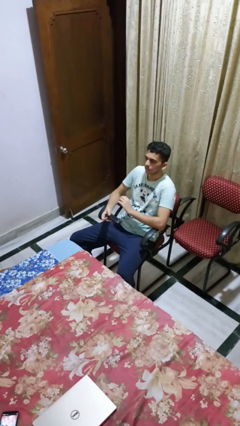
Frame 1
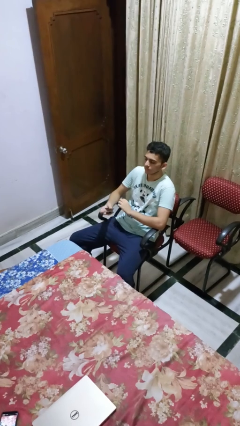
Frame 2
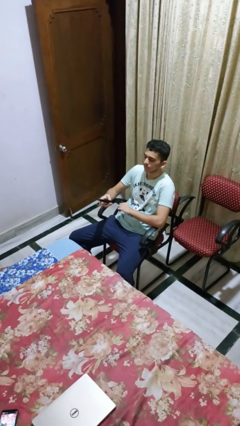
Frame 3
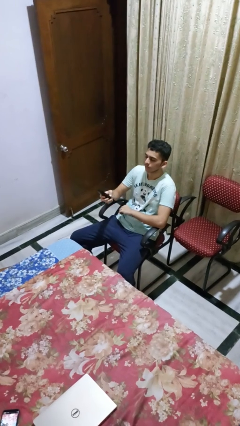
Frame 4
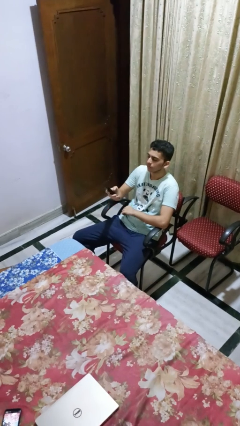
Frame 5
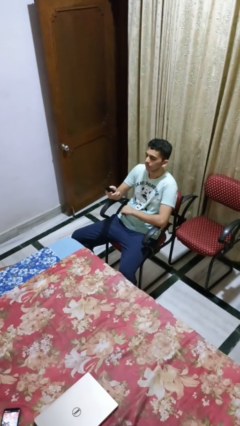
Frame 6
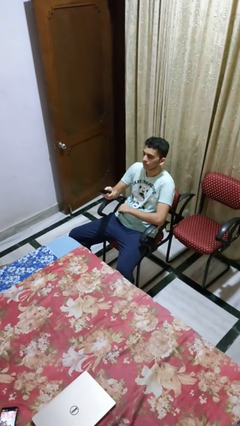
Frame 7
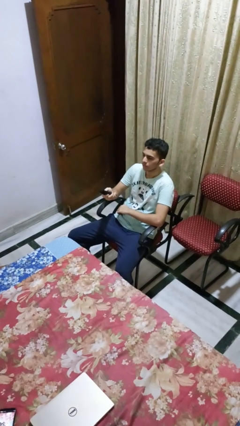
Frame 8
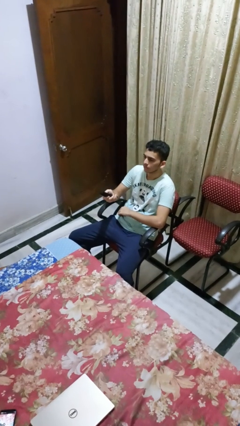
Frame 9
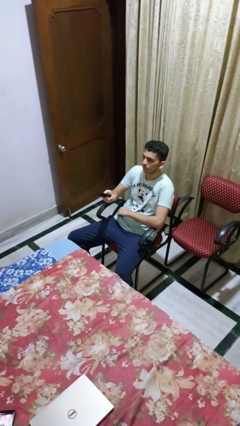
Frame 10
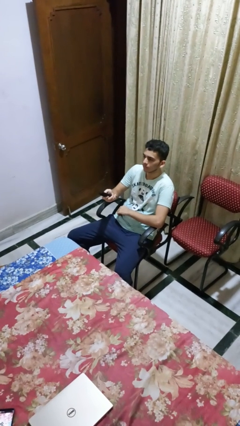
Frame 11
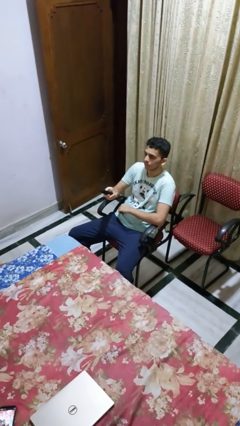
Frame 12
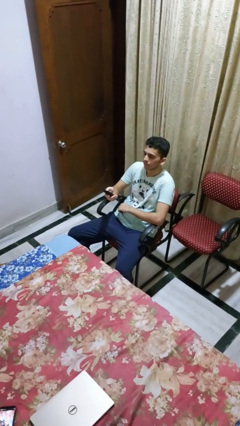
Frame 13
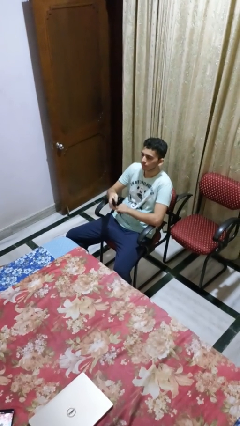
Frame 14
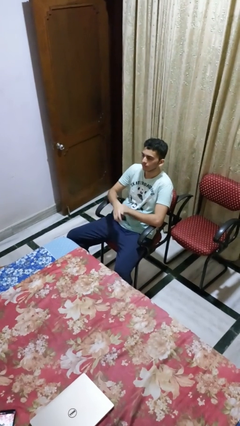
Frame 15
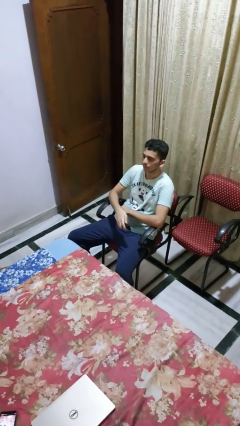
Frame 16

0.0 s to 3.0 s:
person uses television remote

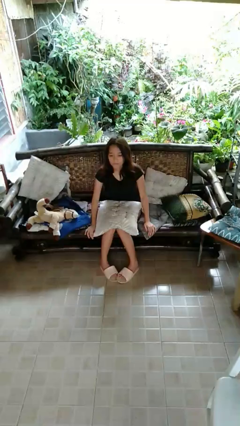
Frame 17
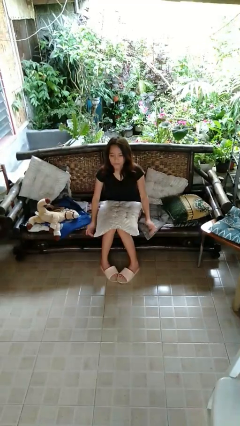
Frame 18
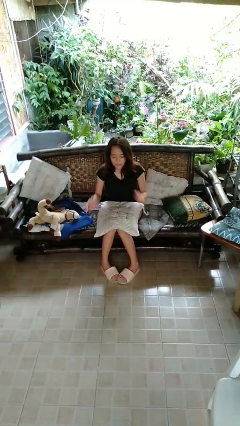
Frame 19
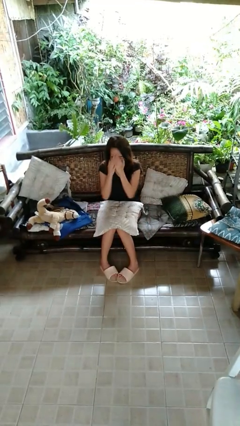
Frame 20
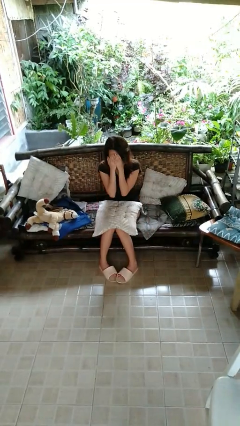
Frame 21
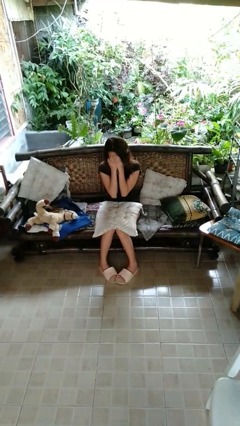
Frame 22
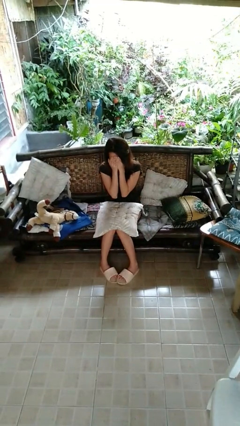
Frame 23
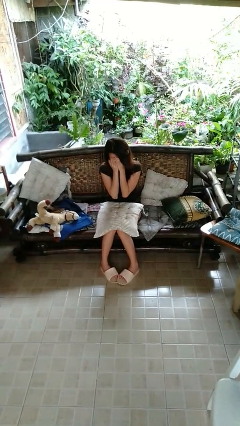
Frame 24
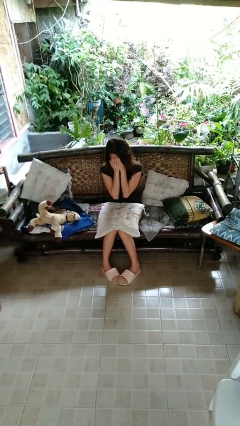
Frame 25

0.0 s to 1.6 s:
person covers face with hands

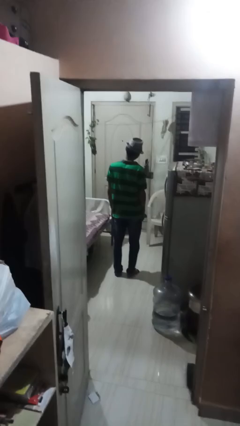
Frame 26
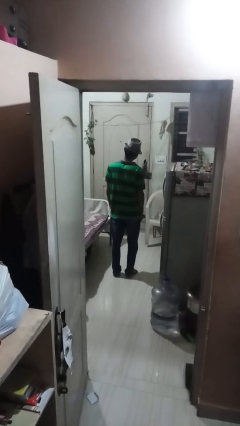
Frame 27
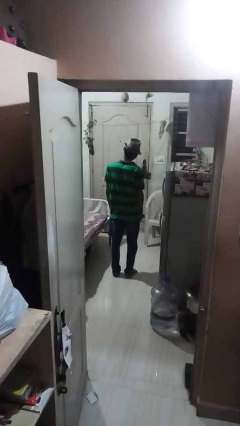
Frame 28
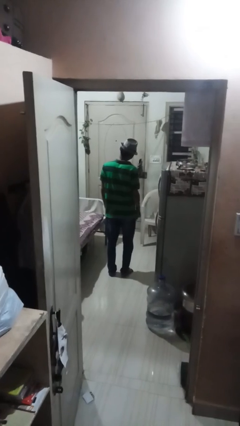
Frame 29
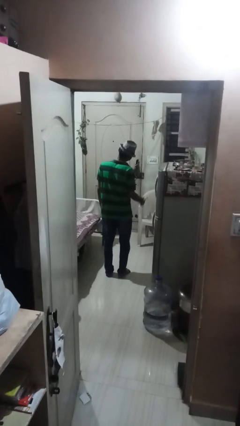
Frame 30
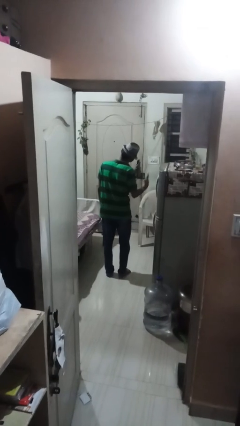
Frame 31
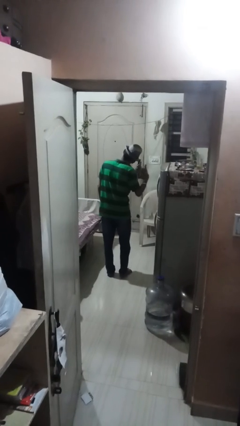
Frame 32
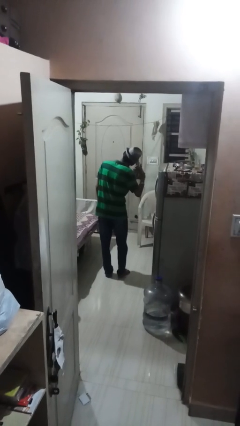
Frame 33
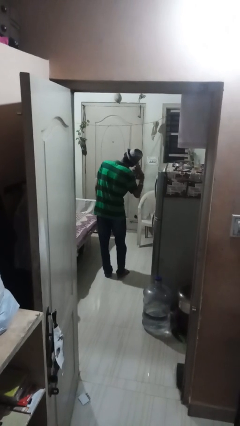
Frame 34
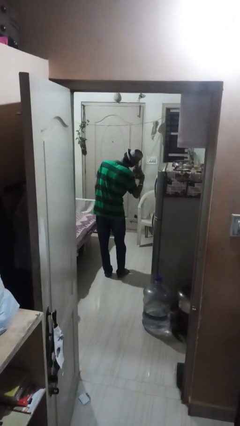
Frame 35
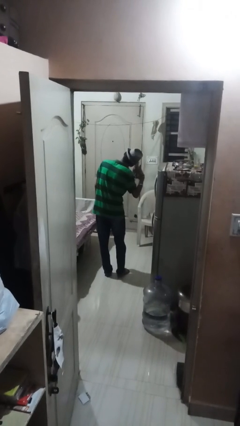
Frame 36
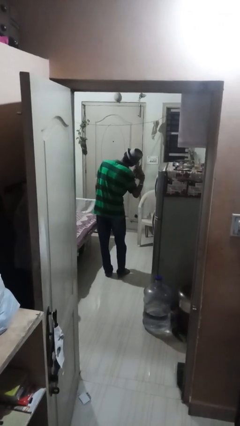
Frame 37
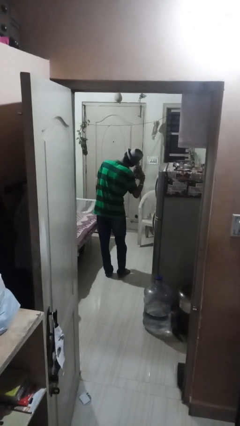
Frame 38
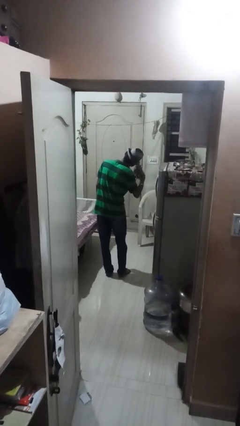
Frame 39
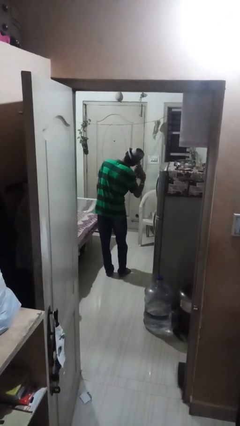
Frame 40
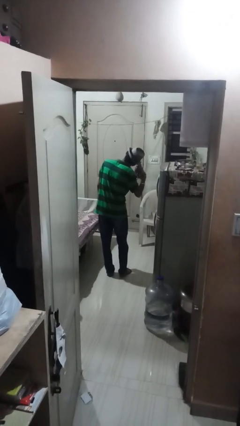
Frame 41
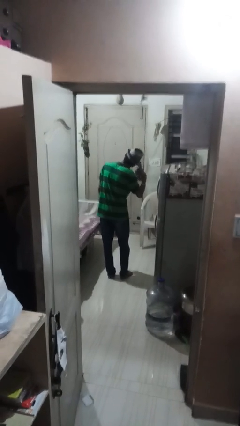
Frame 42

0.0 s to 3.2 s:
person gestures call me

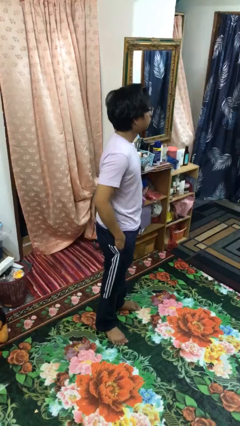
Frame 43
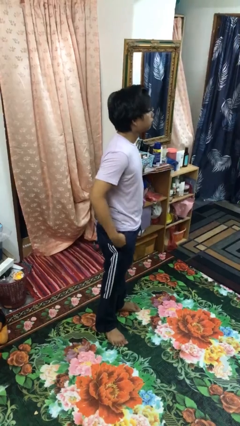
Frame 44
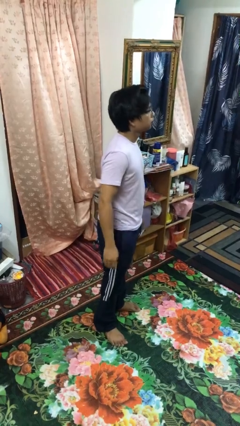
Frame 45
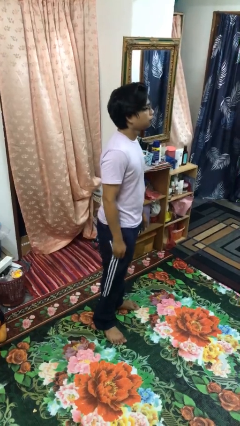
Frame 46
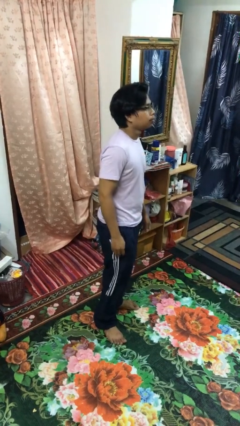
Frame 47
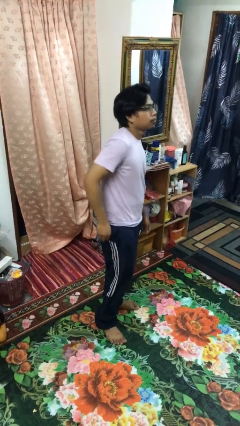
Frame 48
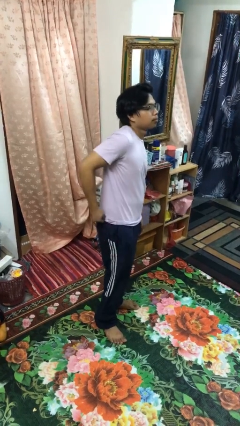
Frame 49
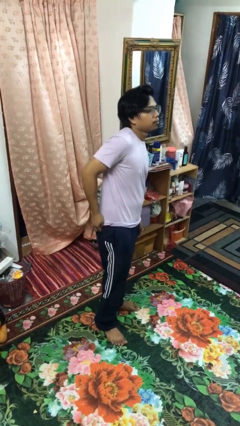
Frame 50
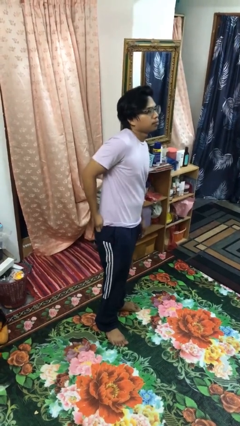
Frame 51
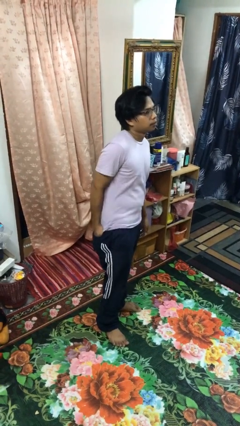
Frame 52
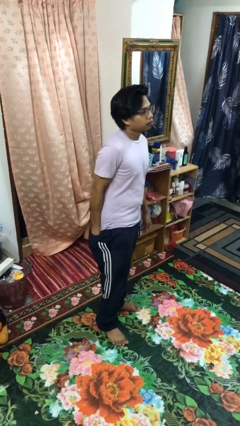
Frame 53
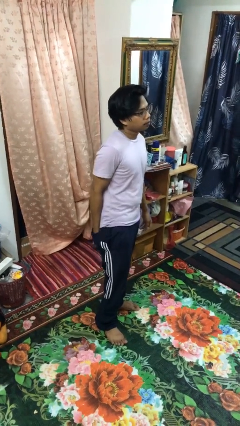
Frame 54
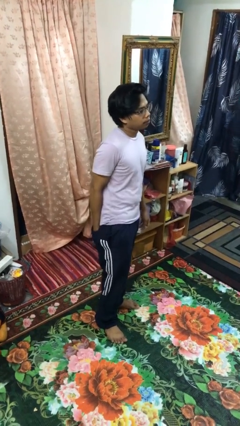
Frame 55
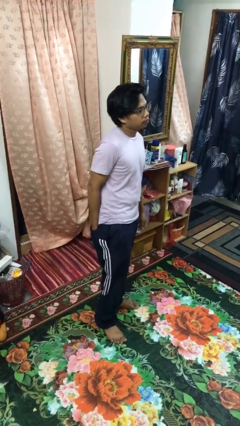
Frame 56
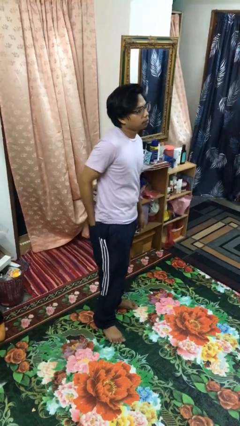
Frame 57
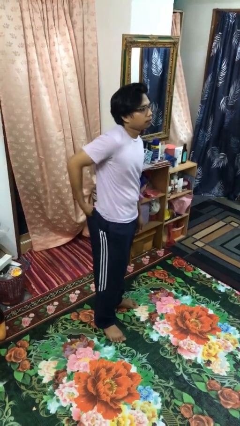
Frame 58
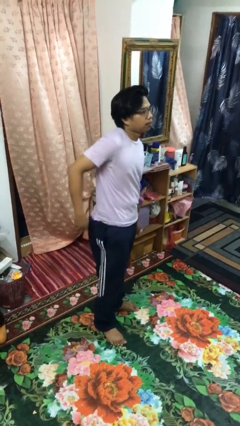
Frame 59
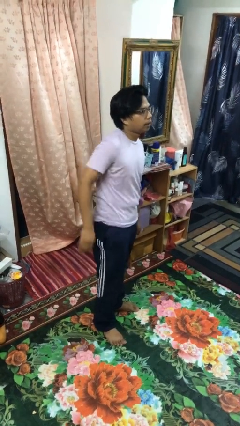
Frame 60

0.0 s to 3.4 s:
person puts hands in back pockets

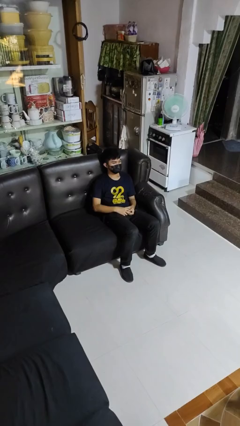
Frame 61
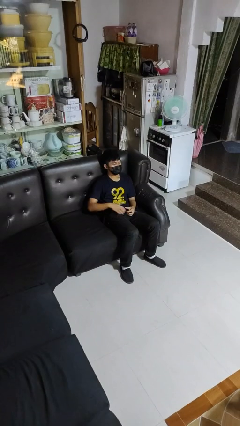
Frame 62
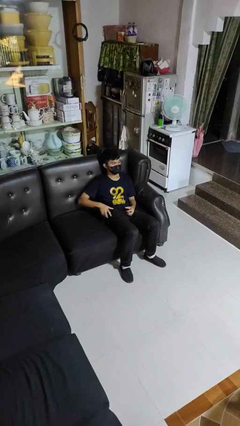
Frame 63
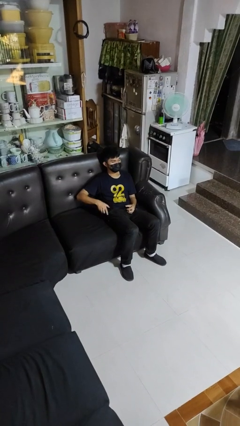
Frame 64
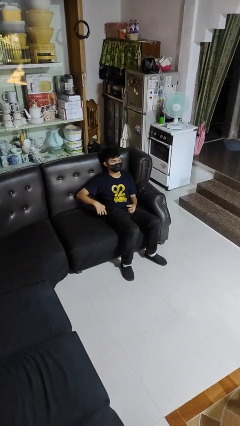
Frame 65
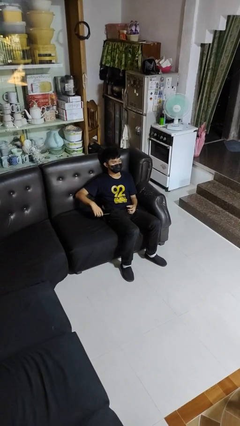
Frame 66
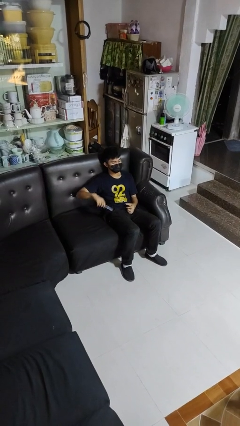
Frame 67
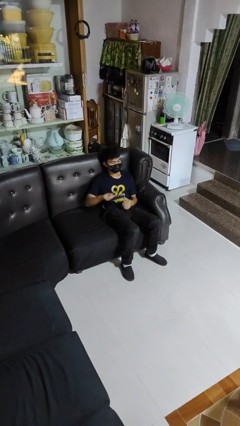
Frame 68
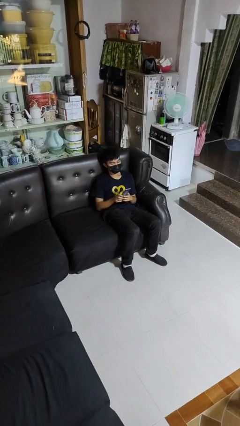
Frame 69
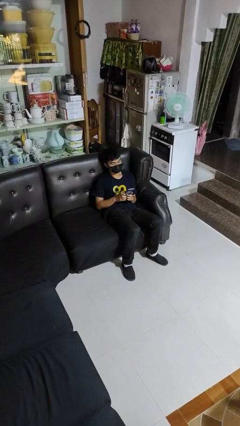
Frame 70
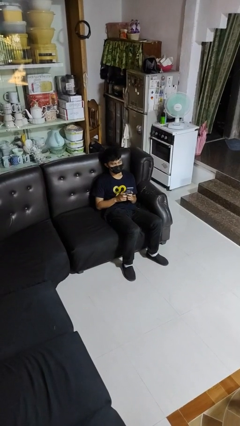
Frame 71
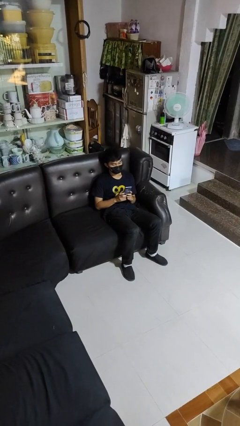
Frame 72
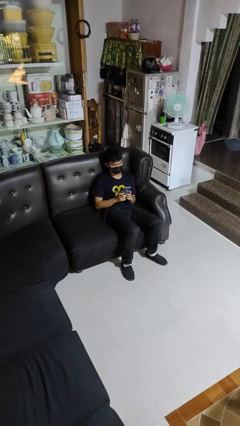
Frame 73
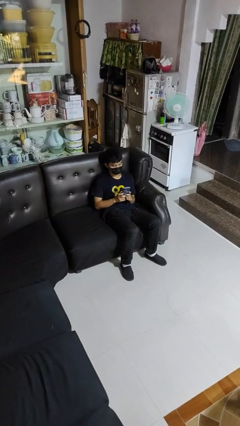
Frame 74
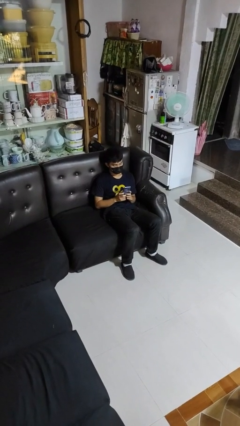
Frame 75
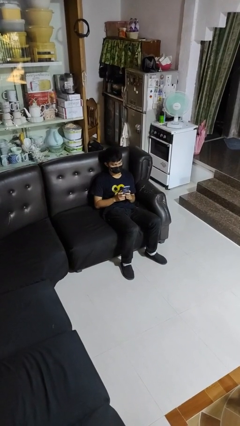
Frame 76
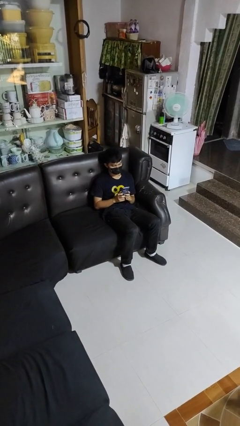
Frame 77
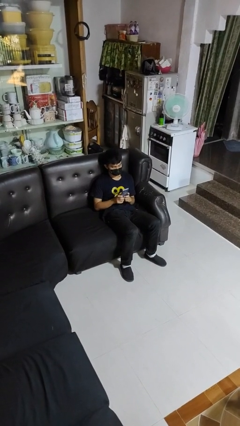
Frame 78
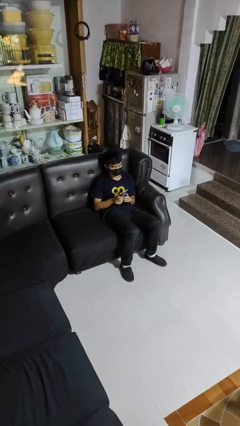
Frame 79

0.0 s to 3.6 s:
person takes phone from pocket

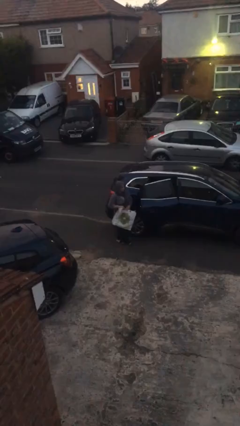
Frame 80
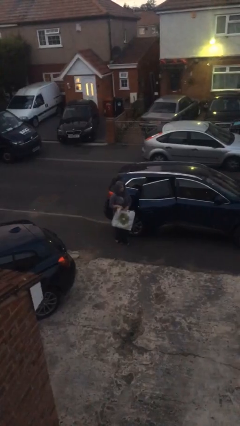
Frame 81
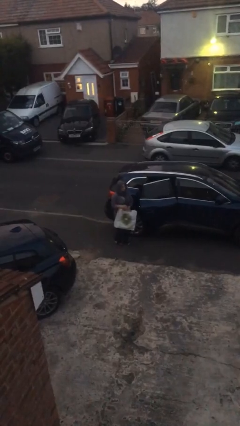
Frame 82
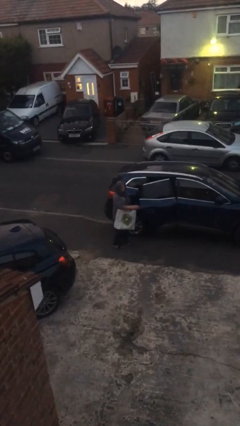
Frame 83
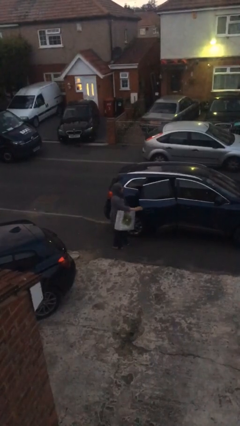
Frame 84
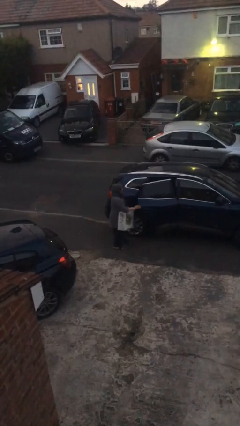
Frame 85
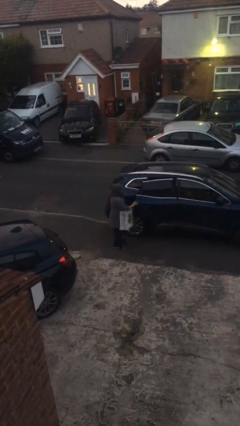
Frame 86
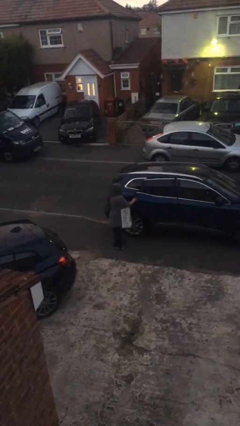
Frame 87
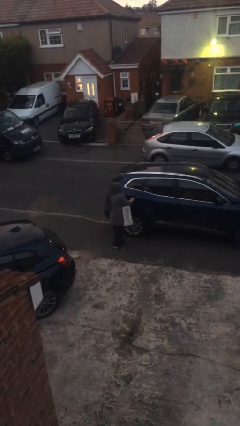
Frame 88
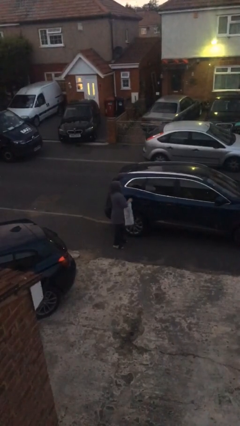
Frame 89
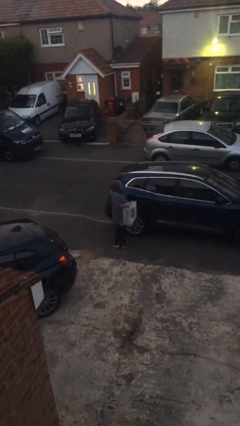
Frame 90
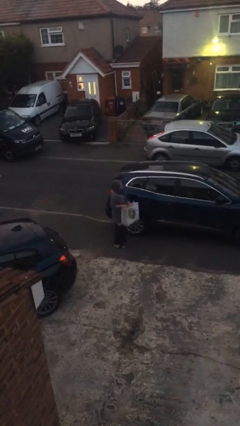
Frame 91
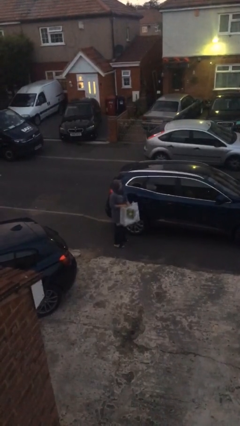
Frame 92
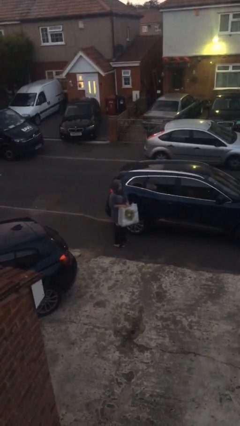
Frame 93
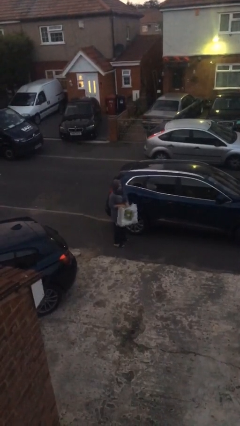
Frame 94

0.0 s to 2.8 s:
person closes car door
